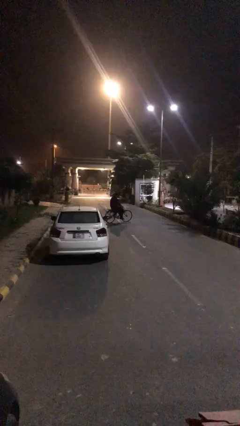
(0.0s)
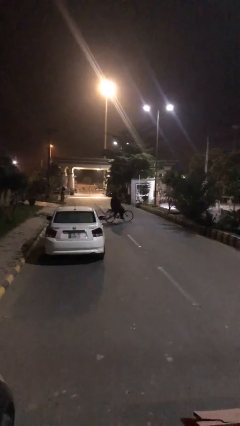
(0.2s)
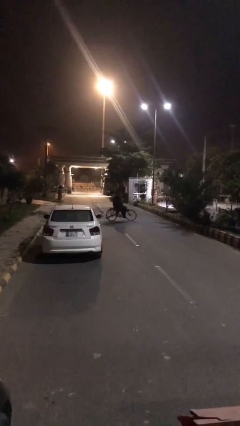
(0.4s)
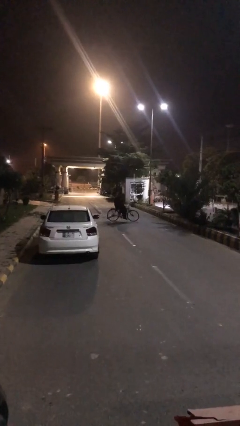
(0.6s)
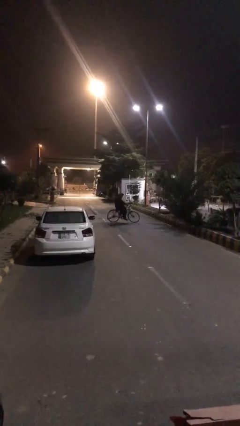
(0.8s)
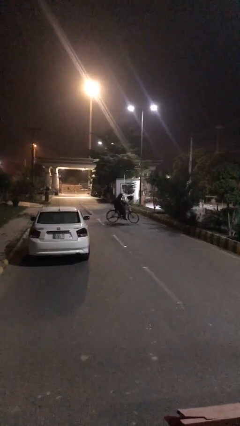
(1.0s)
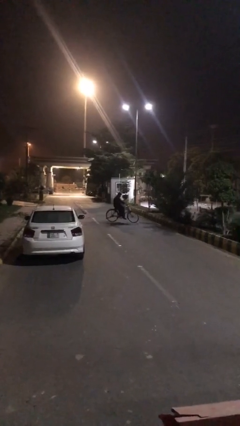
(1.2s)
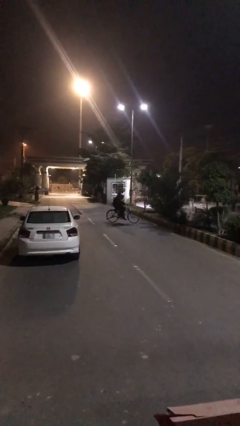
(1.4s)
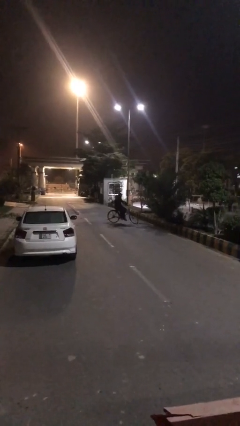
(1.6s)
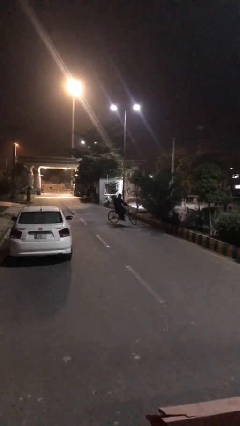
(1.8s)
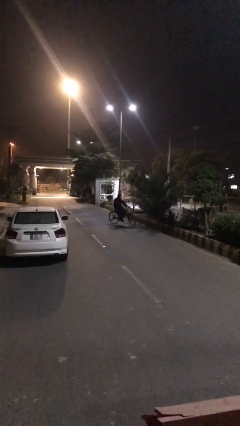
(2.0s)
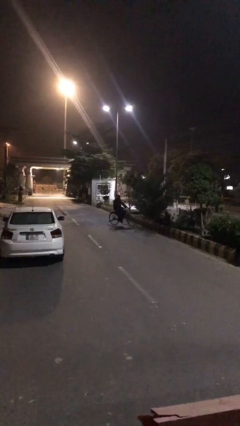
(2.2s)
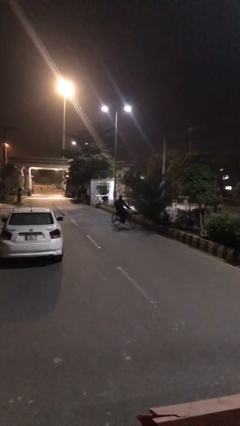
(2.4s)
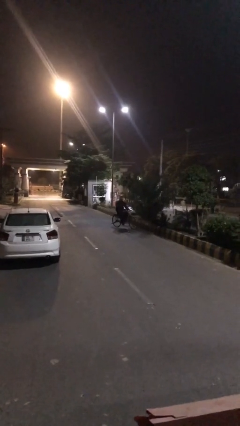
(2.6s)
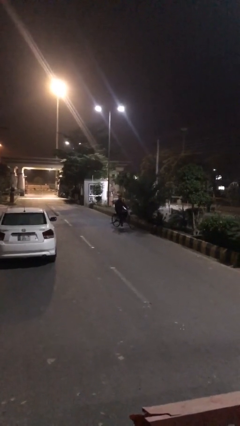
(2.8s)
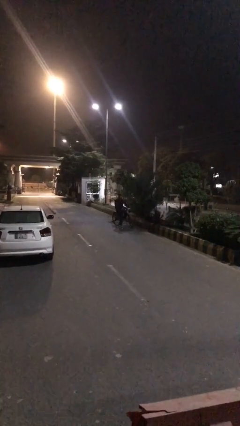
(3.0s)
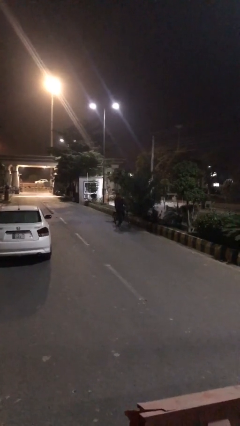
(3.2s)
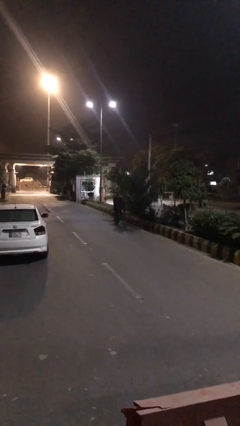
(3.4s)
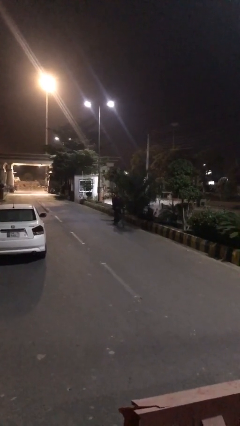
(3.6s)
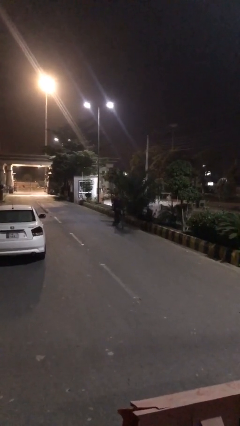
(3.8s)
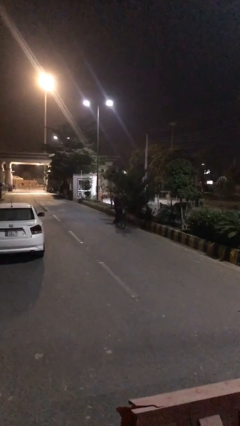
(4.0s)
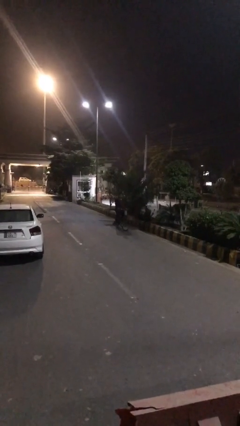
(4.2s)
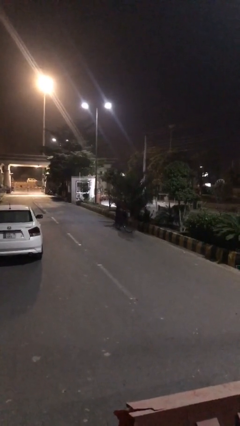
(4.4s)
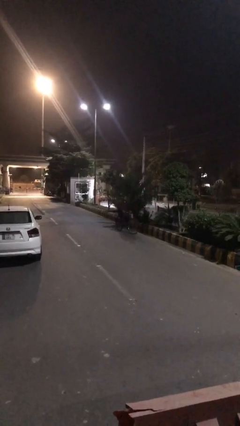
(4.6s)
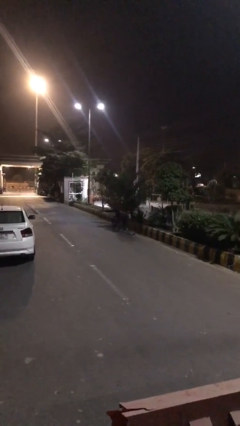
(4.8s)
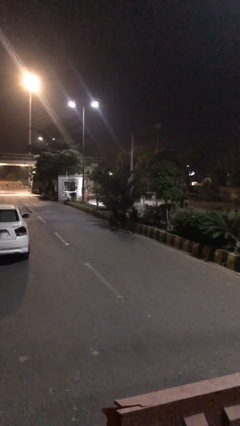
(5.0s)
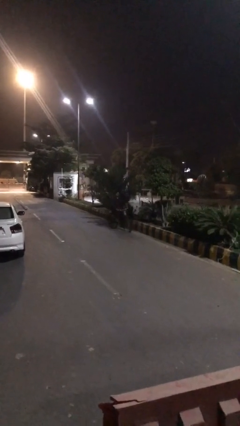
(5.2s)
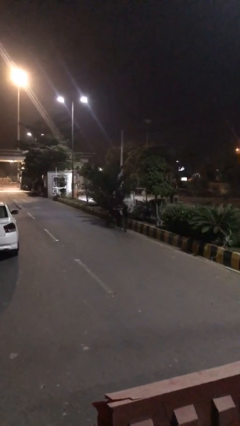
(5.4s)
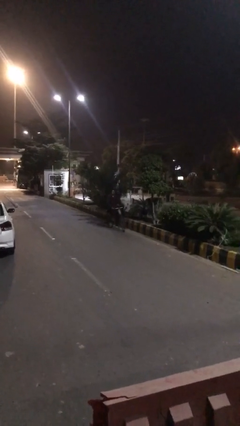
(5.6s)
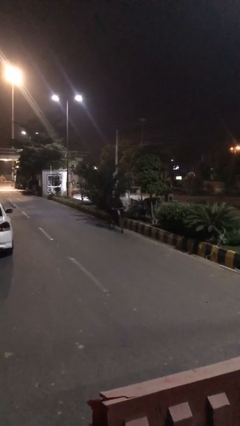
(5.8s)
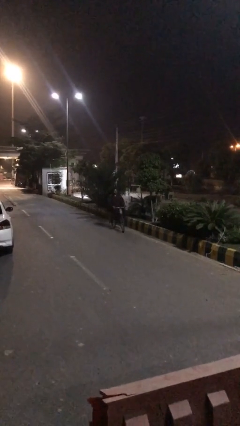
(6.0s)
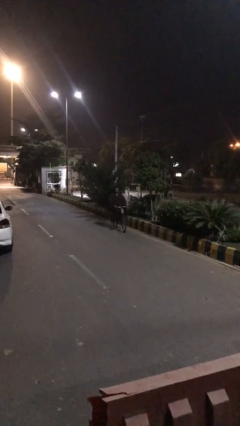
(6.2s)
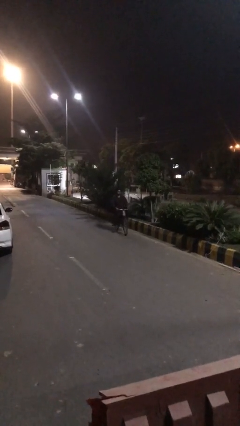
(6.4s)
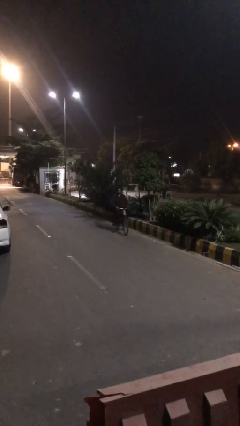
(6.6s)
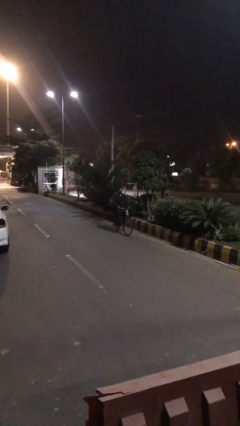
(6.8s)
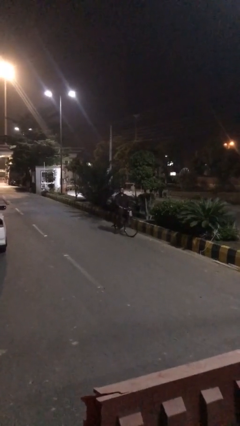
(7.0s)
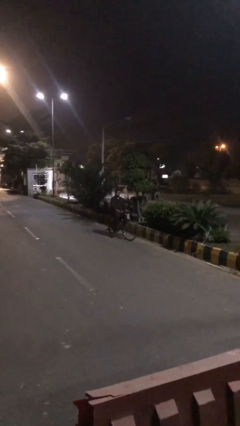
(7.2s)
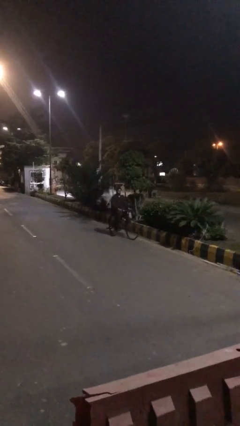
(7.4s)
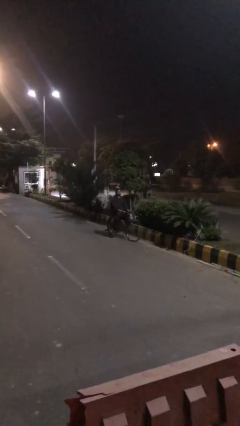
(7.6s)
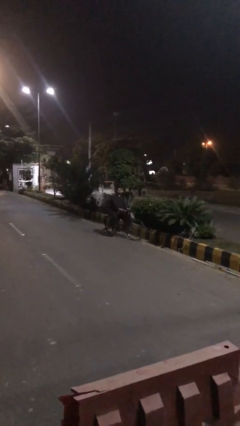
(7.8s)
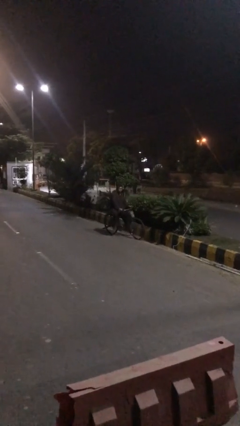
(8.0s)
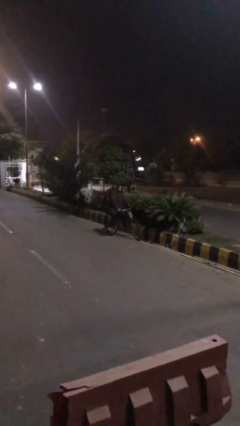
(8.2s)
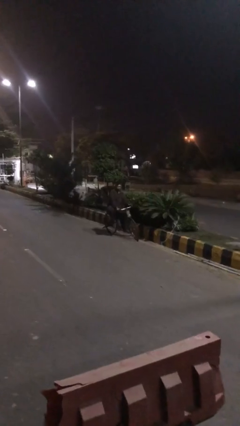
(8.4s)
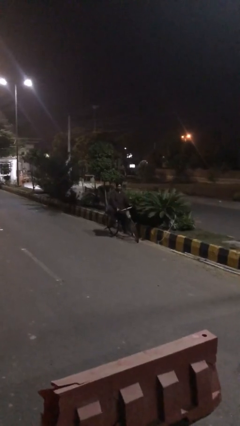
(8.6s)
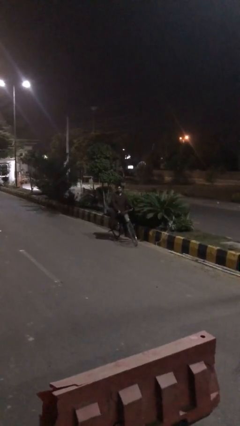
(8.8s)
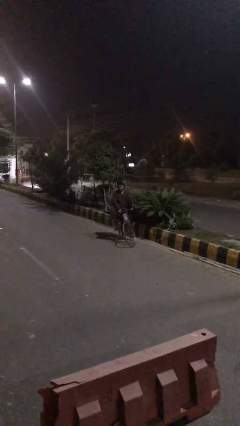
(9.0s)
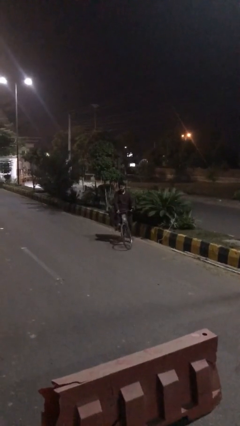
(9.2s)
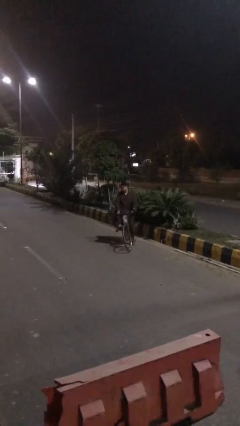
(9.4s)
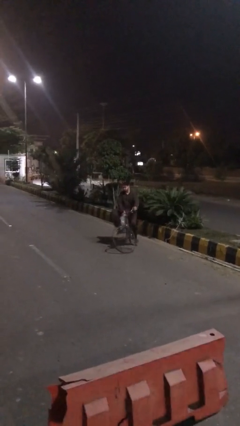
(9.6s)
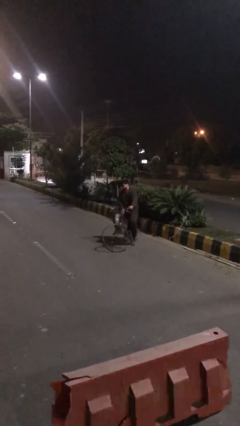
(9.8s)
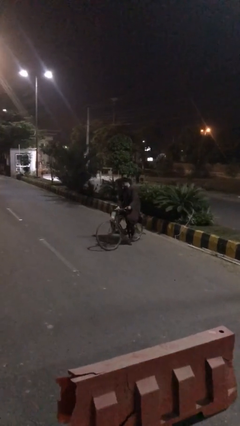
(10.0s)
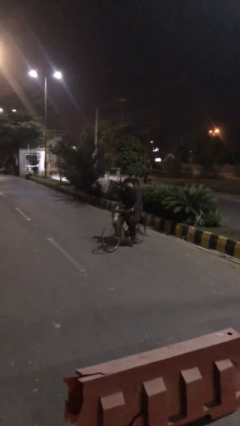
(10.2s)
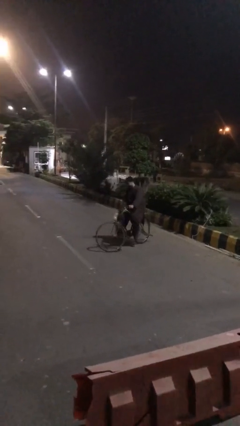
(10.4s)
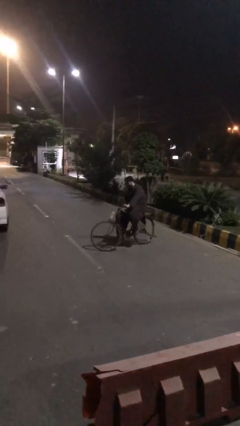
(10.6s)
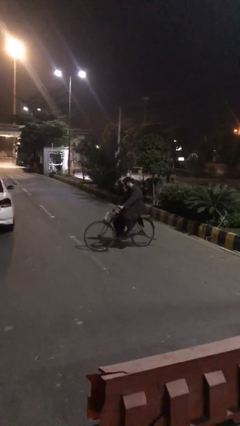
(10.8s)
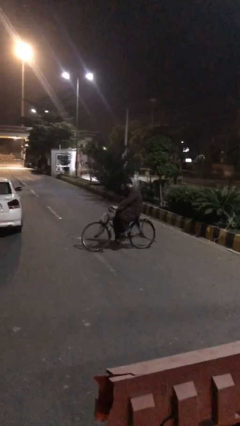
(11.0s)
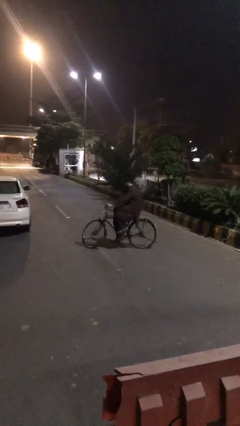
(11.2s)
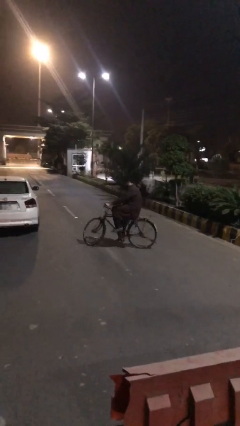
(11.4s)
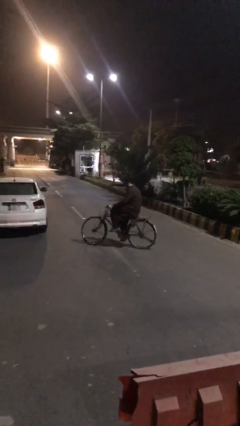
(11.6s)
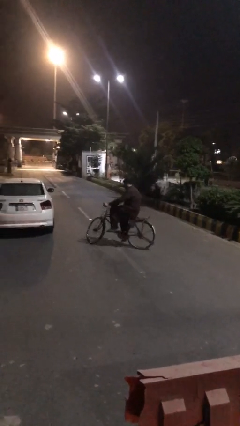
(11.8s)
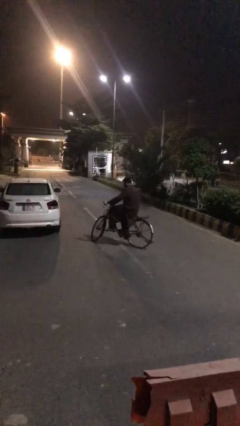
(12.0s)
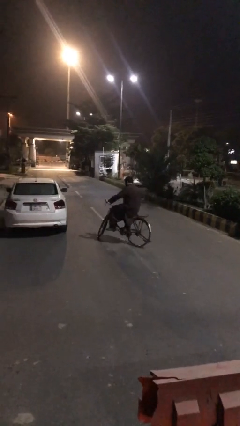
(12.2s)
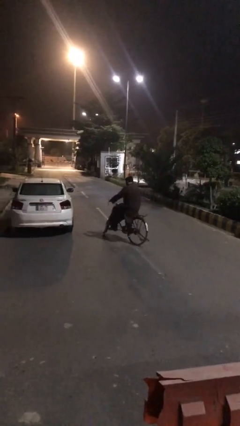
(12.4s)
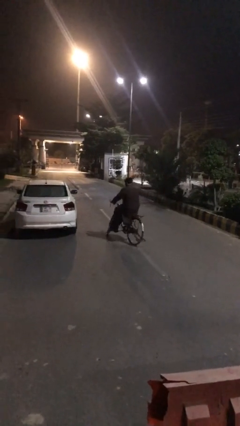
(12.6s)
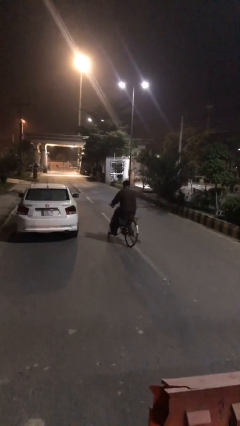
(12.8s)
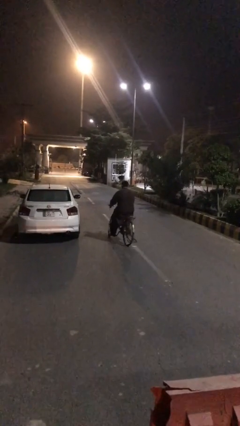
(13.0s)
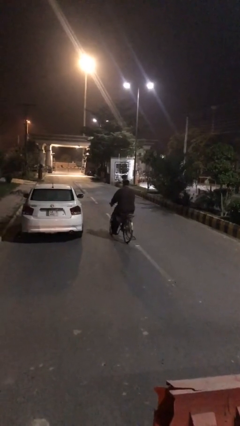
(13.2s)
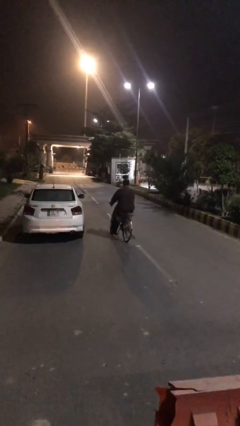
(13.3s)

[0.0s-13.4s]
person rides bicycle

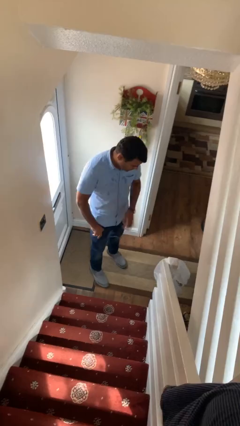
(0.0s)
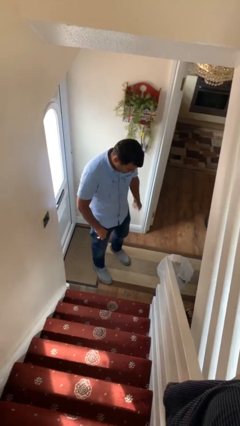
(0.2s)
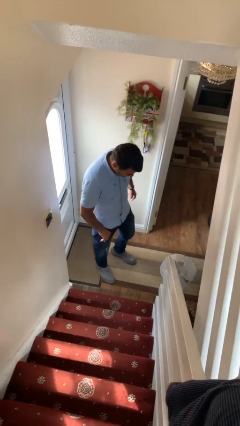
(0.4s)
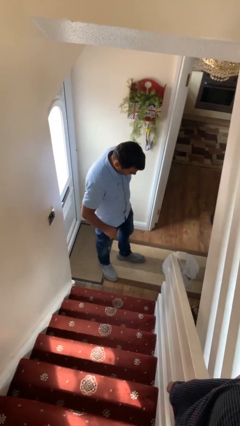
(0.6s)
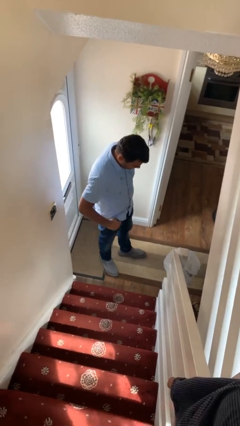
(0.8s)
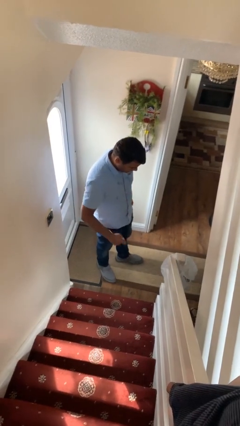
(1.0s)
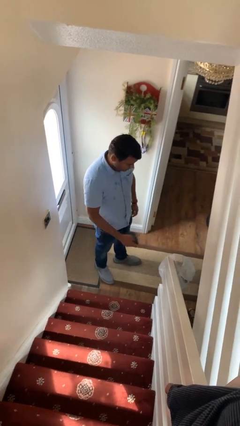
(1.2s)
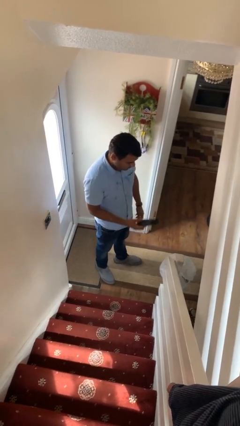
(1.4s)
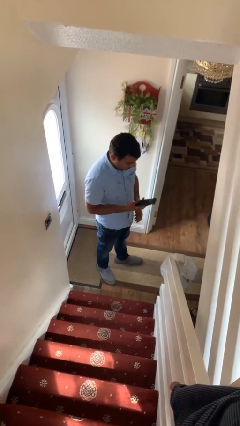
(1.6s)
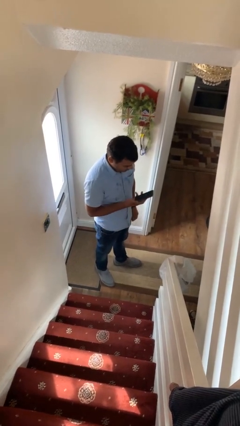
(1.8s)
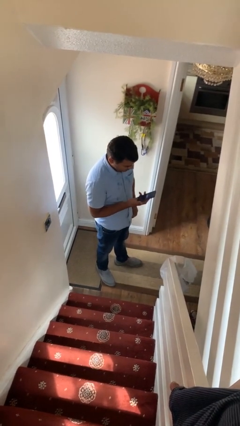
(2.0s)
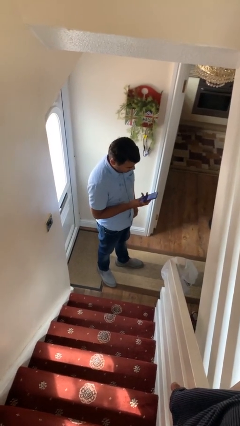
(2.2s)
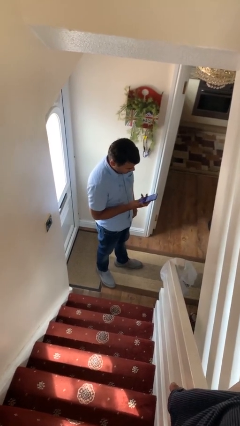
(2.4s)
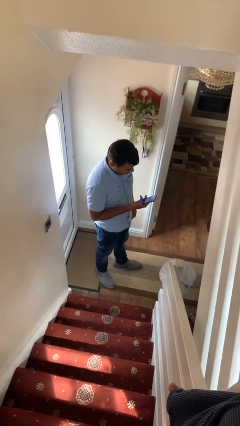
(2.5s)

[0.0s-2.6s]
person takes phone from pocket

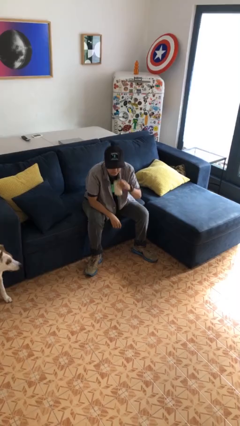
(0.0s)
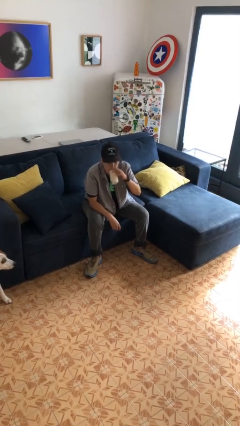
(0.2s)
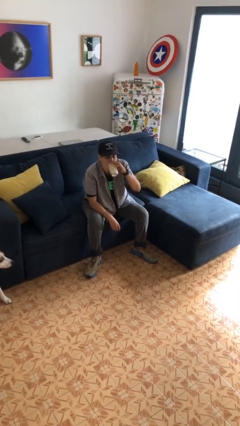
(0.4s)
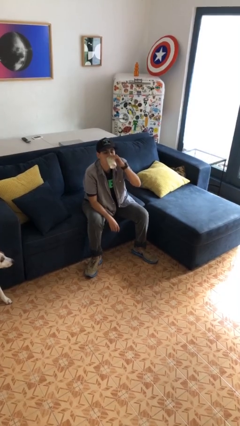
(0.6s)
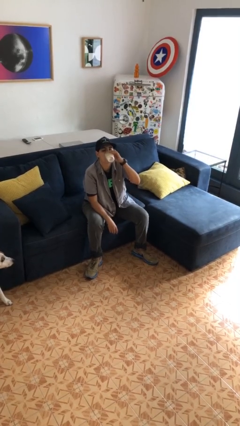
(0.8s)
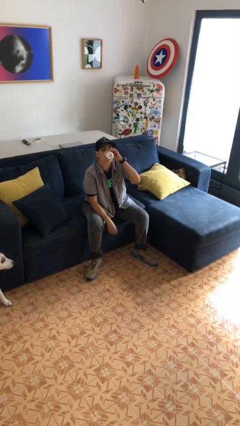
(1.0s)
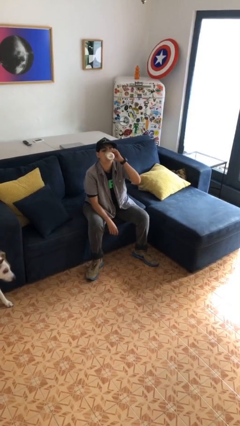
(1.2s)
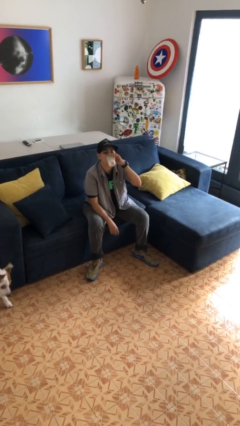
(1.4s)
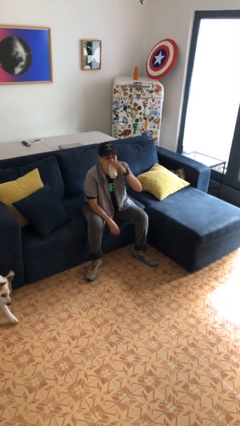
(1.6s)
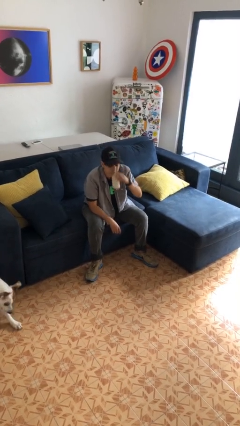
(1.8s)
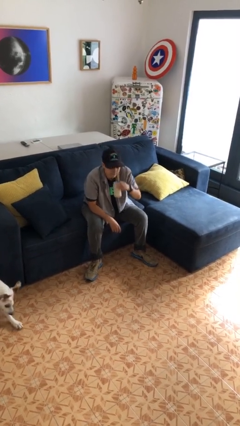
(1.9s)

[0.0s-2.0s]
person drinks from beverage can
